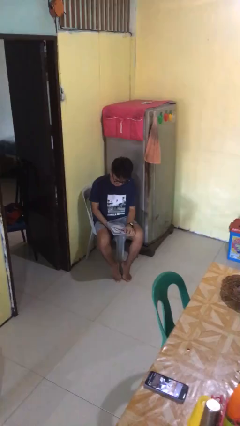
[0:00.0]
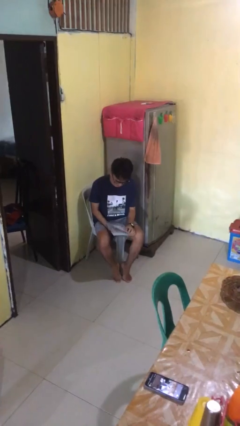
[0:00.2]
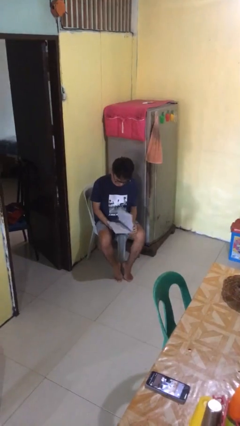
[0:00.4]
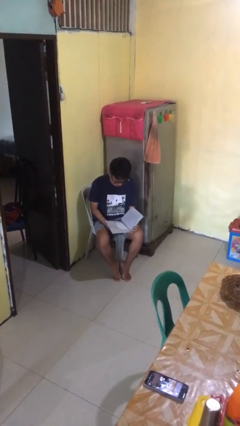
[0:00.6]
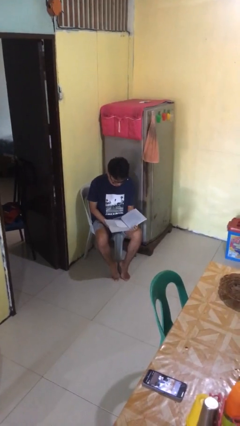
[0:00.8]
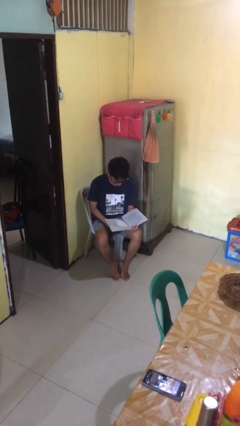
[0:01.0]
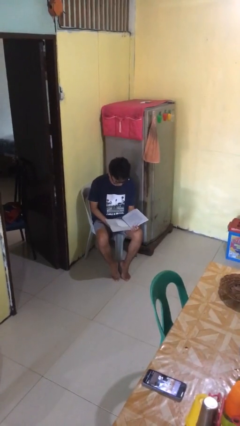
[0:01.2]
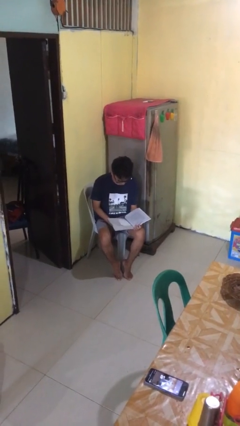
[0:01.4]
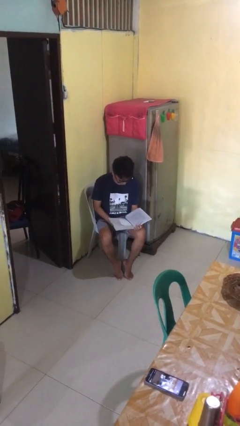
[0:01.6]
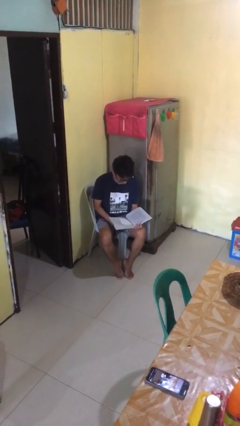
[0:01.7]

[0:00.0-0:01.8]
person reads book

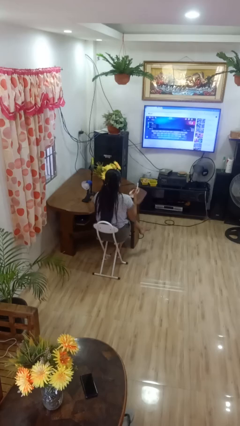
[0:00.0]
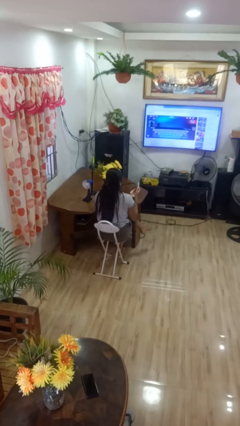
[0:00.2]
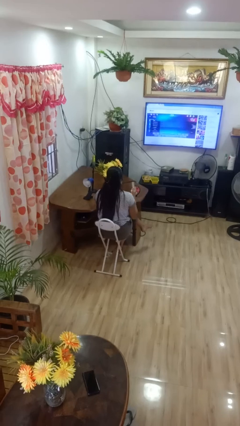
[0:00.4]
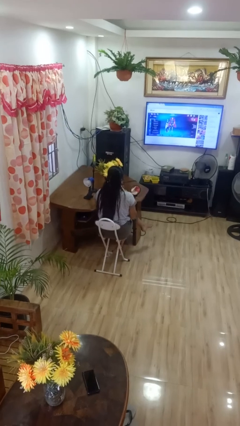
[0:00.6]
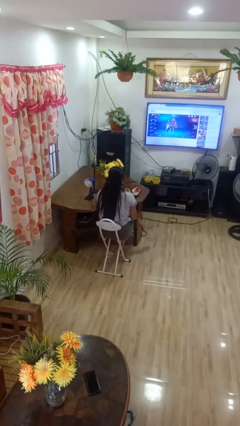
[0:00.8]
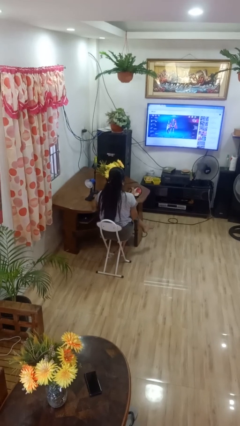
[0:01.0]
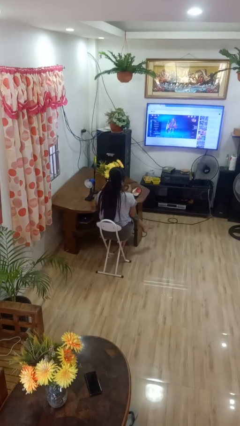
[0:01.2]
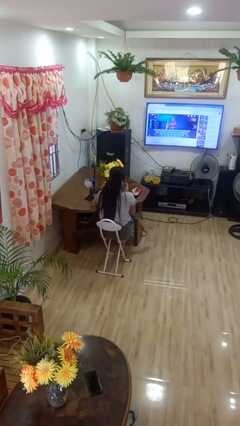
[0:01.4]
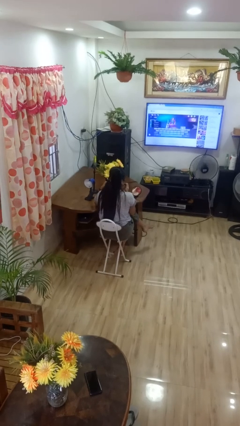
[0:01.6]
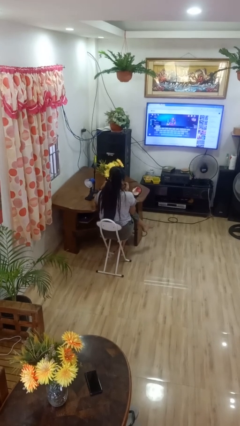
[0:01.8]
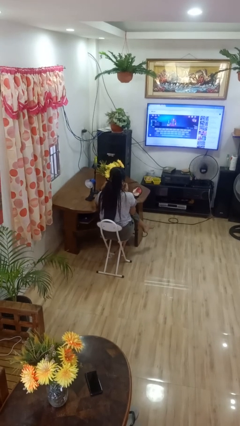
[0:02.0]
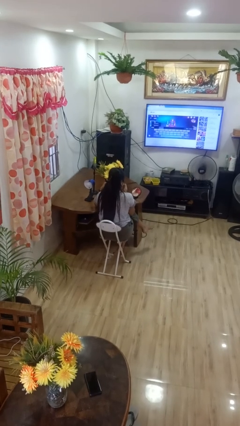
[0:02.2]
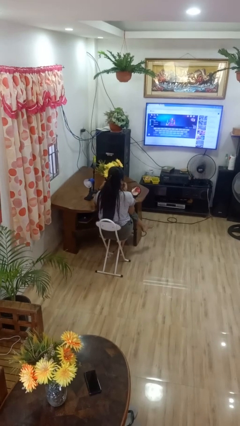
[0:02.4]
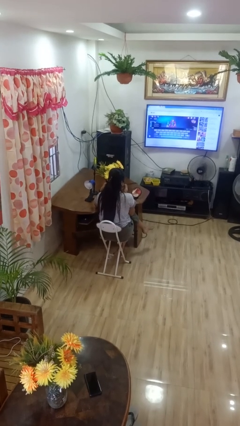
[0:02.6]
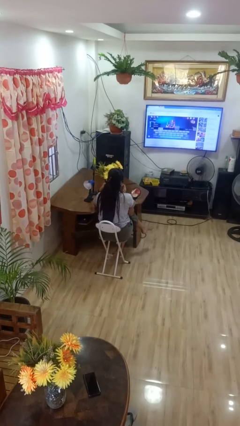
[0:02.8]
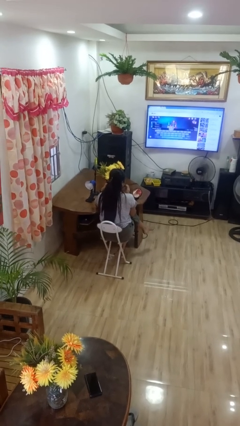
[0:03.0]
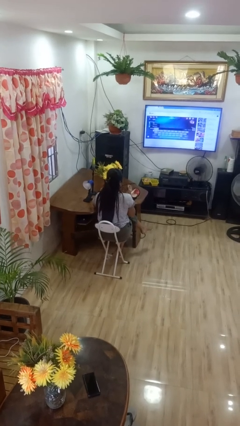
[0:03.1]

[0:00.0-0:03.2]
person applies lip makeup

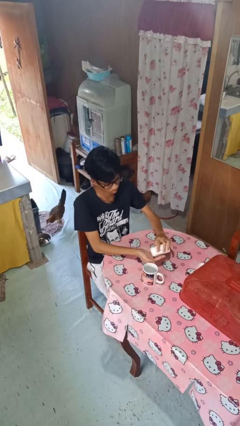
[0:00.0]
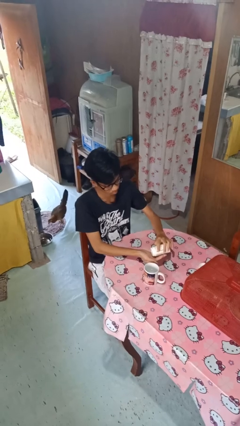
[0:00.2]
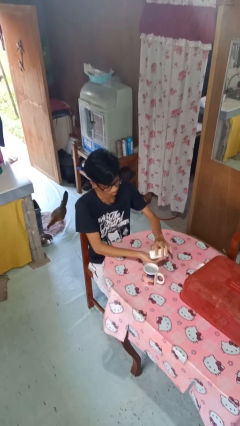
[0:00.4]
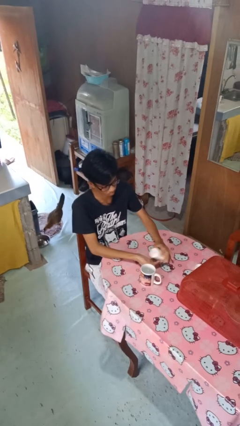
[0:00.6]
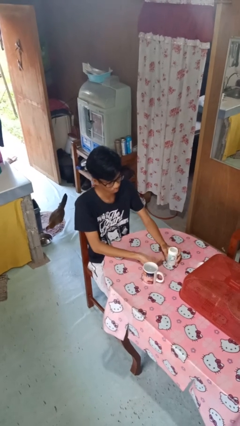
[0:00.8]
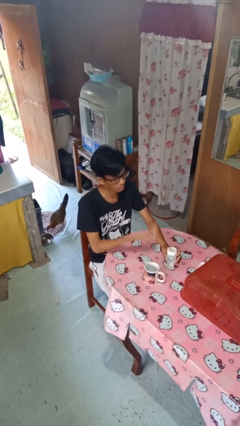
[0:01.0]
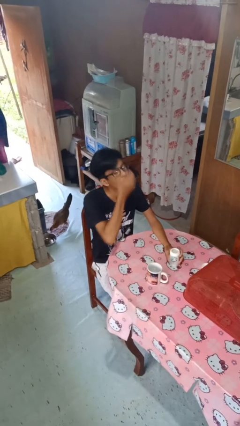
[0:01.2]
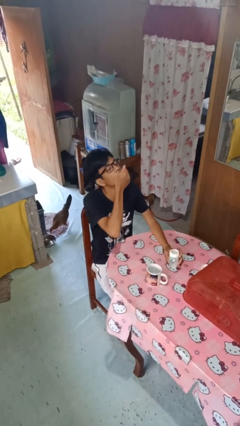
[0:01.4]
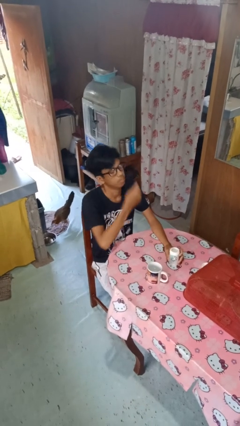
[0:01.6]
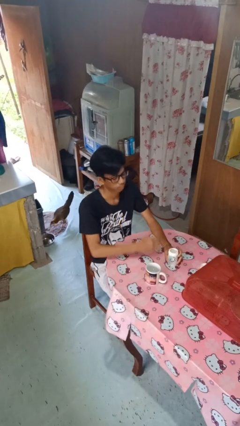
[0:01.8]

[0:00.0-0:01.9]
person takes medicine pills

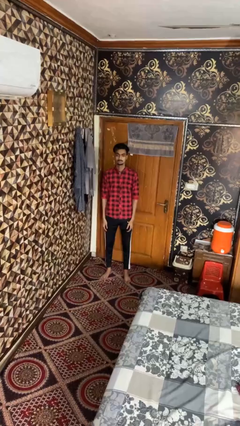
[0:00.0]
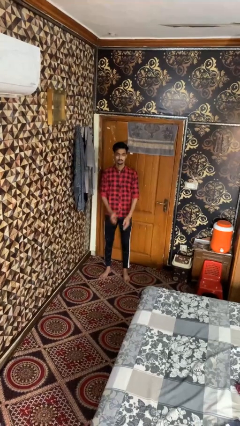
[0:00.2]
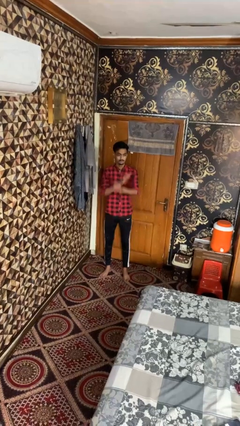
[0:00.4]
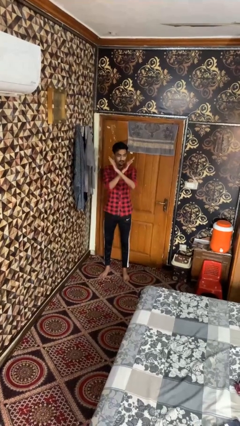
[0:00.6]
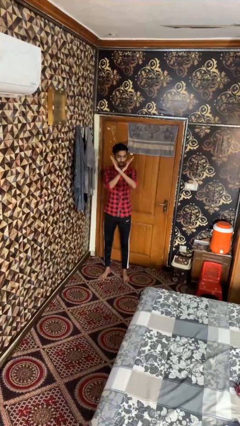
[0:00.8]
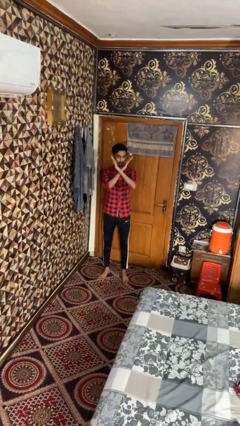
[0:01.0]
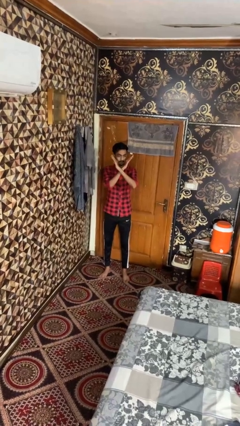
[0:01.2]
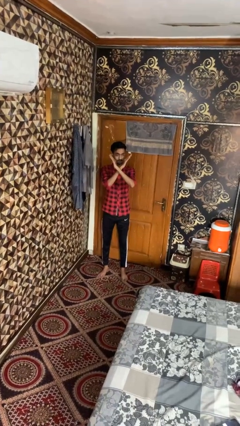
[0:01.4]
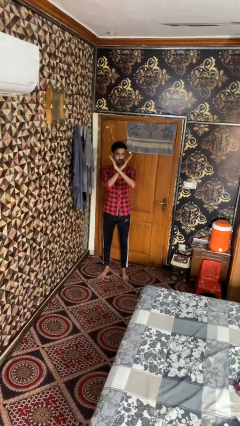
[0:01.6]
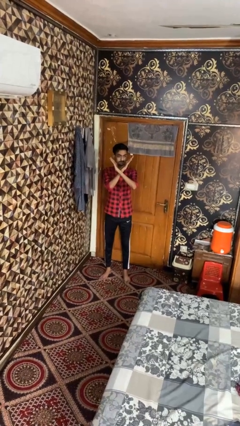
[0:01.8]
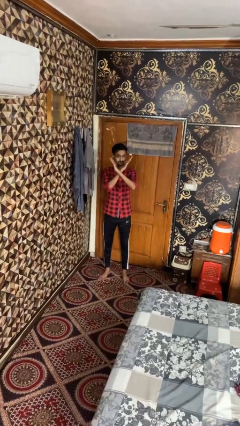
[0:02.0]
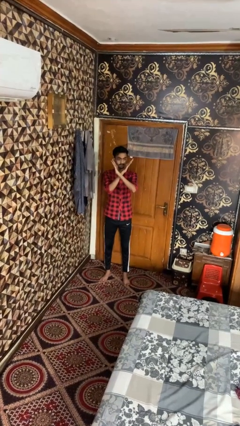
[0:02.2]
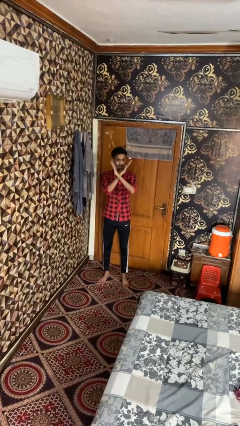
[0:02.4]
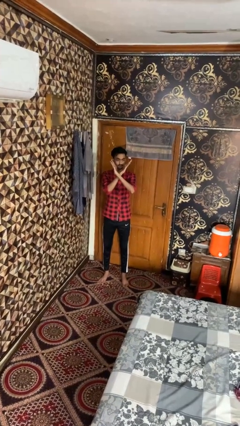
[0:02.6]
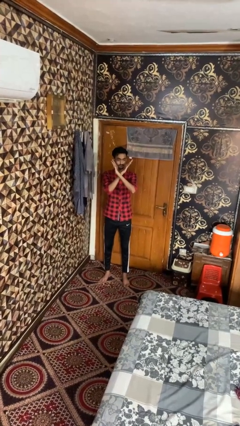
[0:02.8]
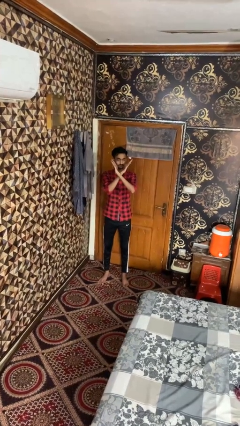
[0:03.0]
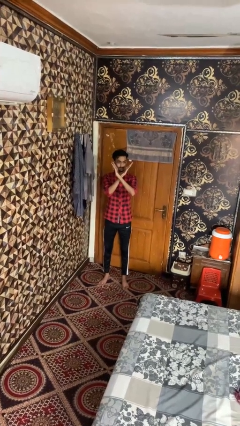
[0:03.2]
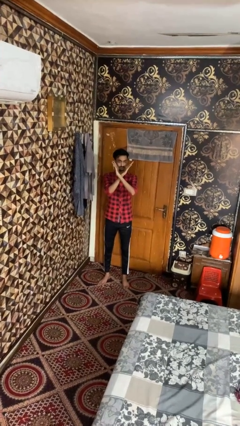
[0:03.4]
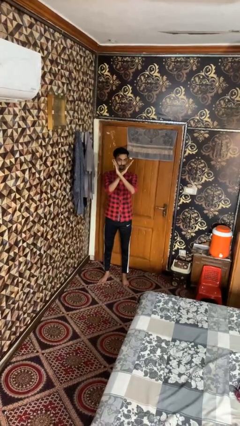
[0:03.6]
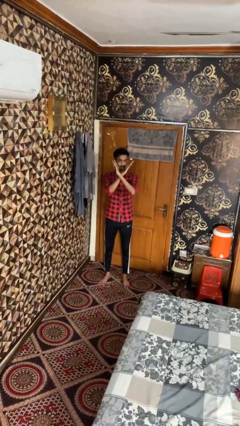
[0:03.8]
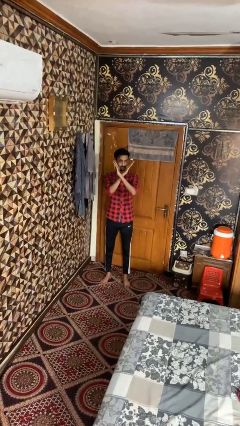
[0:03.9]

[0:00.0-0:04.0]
person gestures arms x

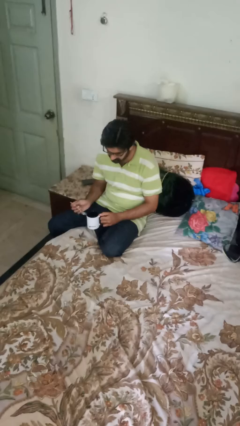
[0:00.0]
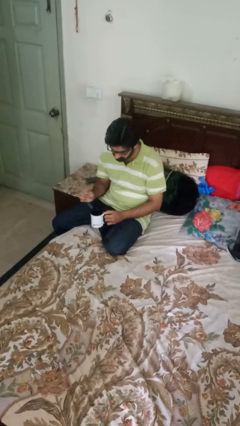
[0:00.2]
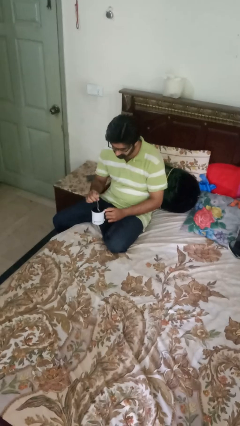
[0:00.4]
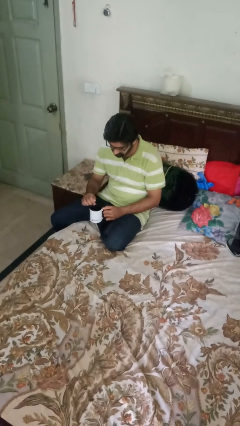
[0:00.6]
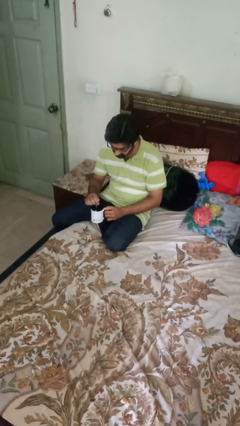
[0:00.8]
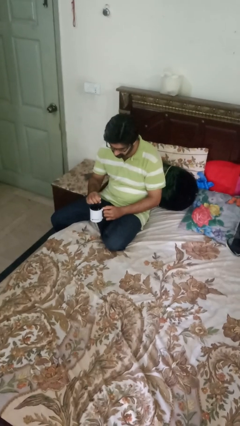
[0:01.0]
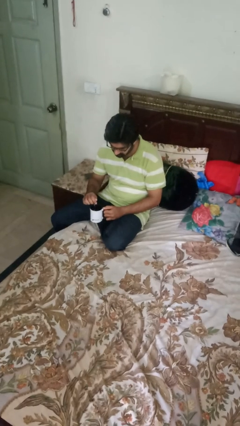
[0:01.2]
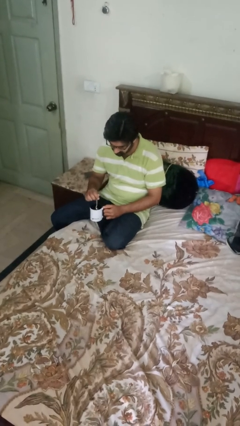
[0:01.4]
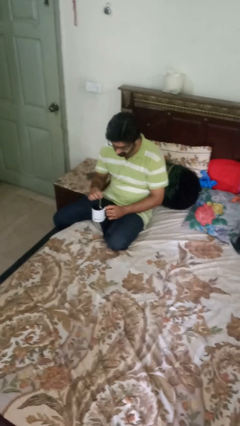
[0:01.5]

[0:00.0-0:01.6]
person stirs mug

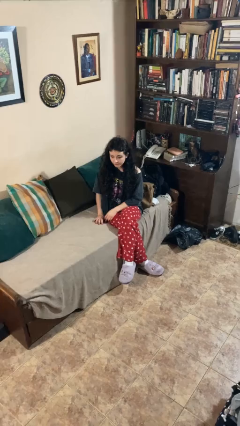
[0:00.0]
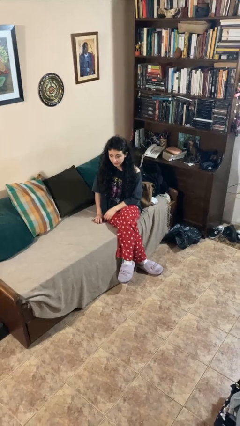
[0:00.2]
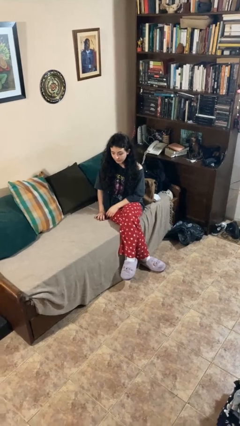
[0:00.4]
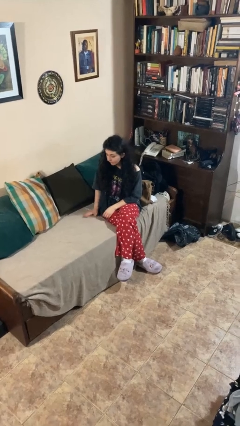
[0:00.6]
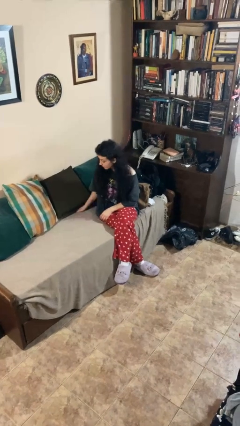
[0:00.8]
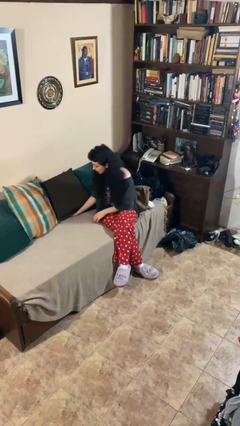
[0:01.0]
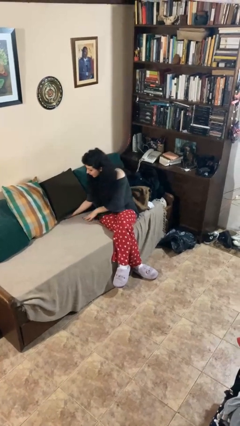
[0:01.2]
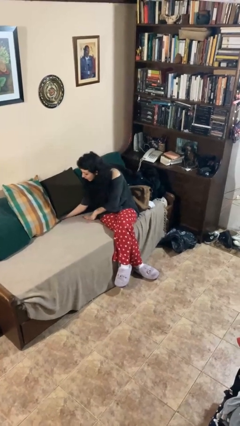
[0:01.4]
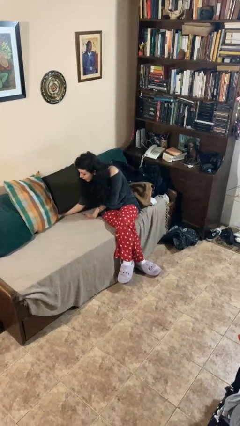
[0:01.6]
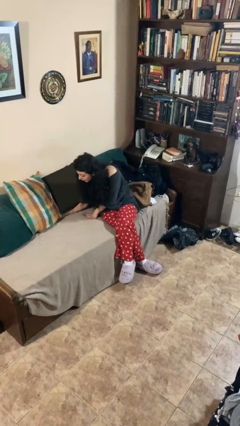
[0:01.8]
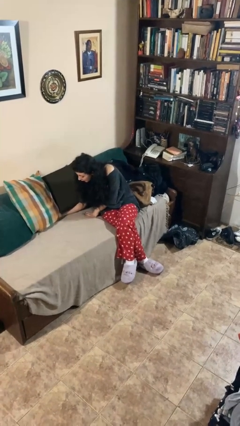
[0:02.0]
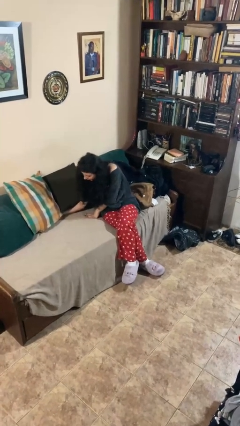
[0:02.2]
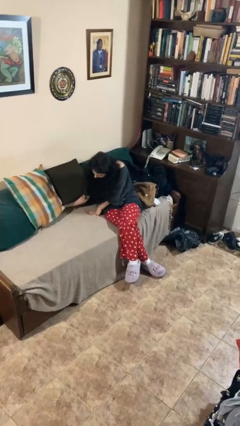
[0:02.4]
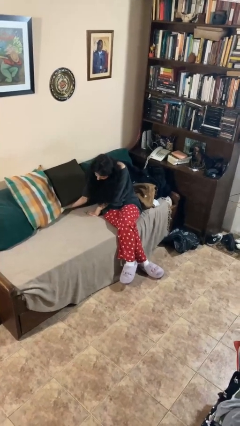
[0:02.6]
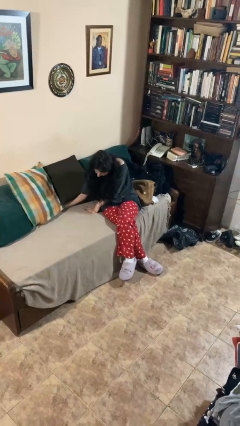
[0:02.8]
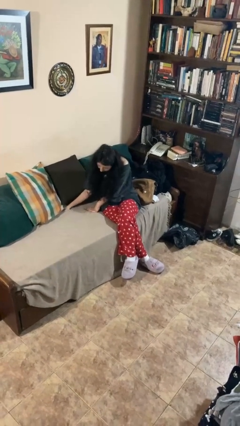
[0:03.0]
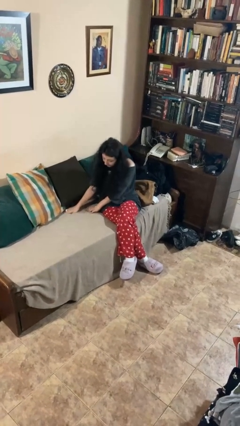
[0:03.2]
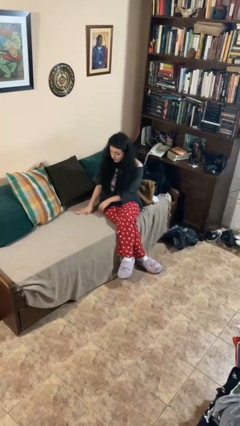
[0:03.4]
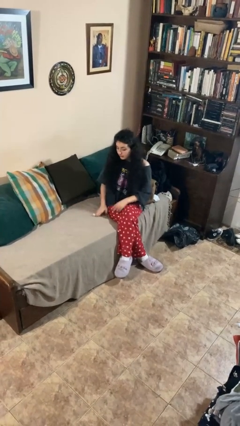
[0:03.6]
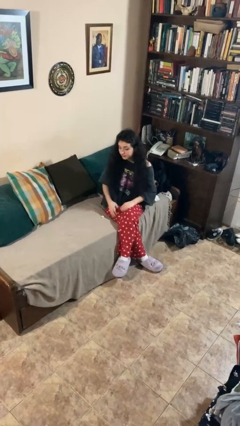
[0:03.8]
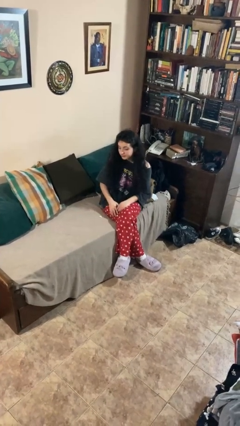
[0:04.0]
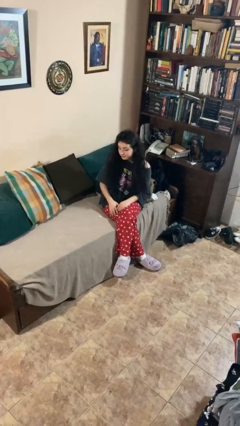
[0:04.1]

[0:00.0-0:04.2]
person searches in couch

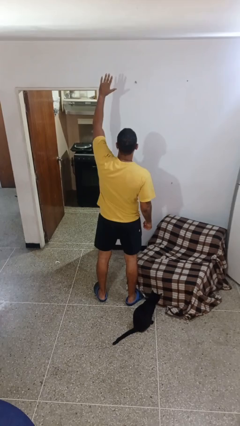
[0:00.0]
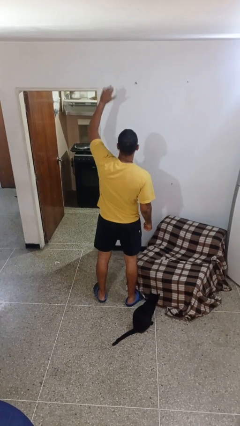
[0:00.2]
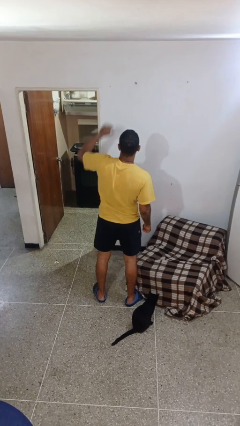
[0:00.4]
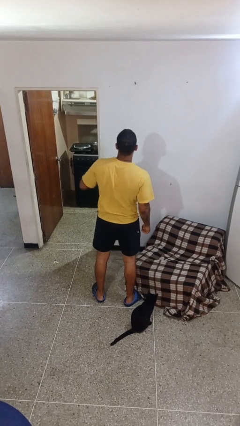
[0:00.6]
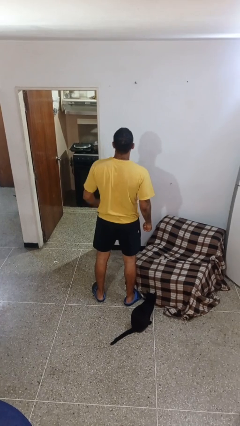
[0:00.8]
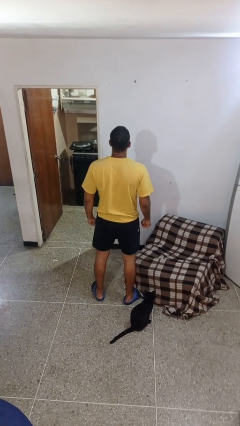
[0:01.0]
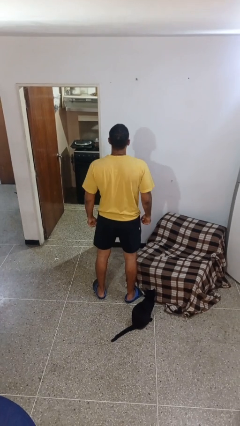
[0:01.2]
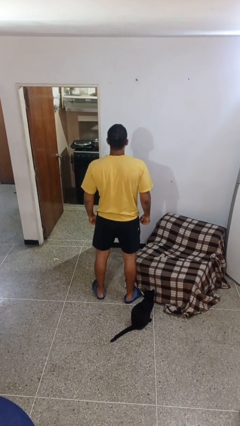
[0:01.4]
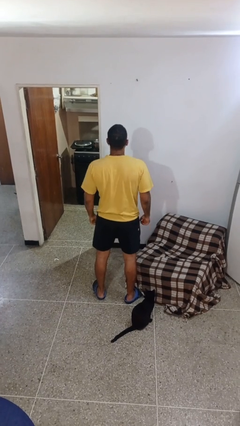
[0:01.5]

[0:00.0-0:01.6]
person gestures lower hand
